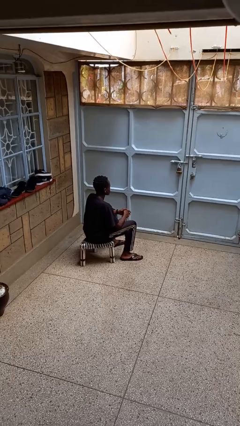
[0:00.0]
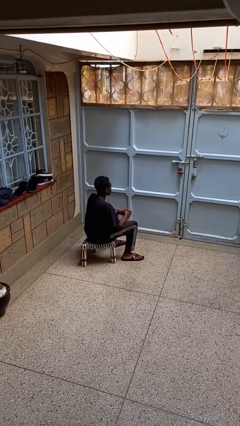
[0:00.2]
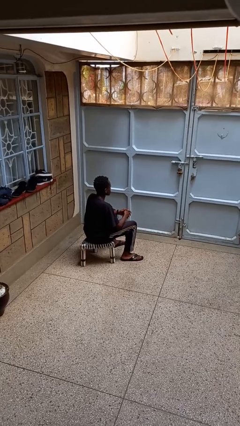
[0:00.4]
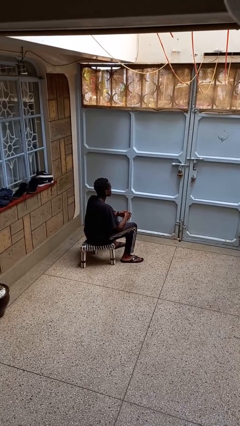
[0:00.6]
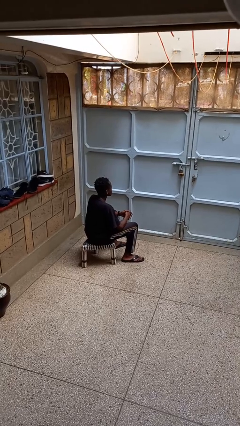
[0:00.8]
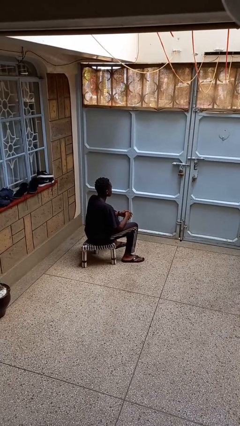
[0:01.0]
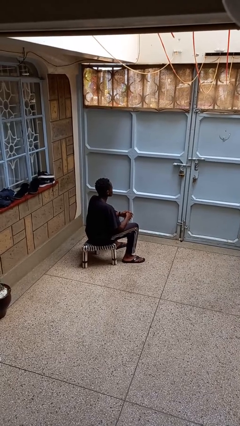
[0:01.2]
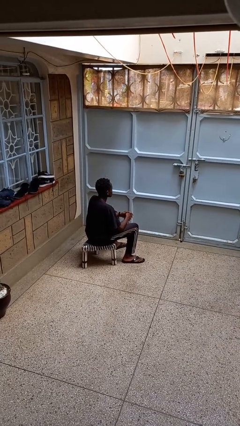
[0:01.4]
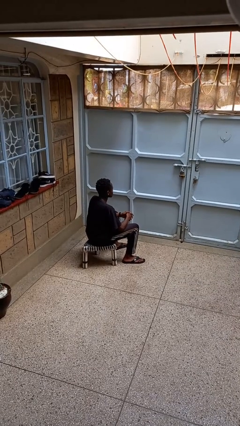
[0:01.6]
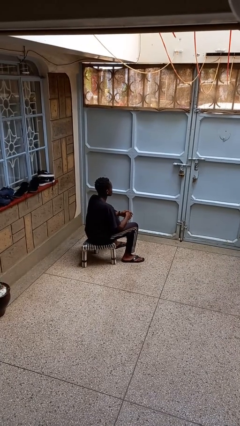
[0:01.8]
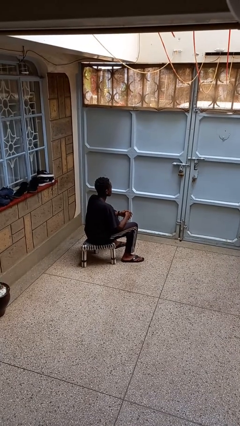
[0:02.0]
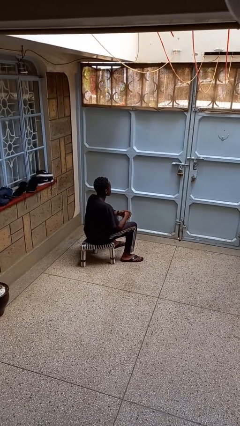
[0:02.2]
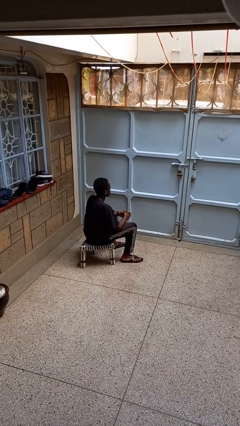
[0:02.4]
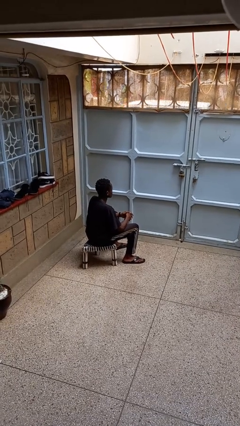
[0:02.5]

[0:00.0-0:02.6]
person nods head

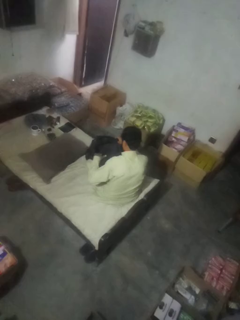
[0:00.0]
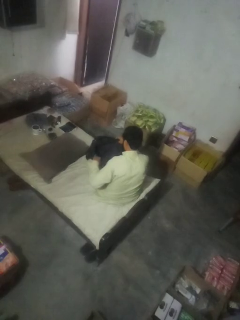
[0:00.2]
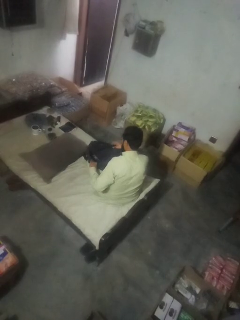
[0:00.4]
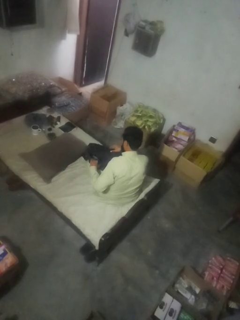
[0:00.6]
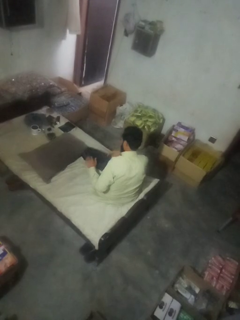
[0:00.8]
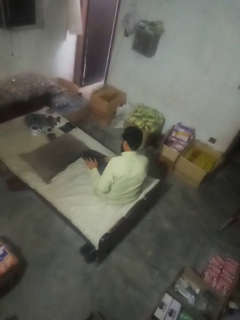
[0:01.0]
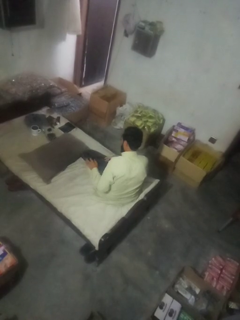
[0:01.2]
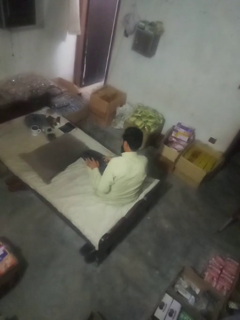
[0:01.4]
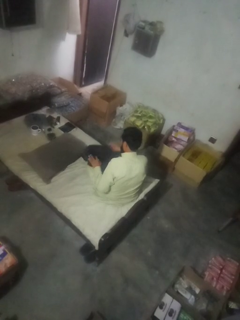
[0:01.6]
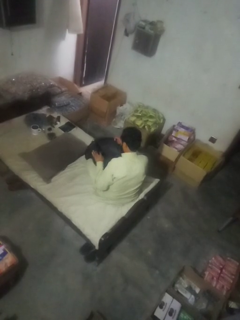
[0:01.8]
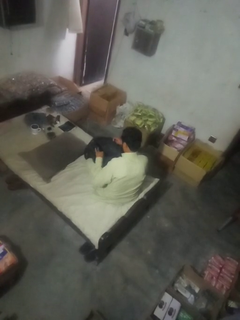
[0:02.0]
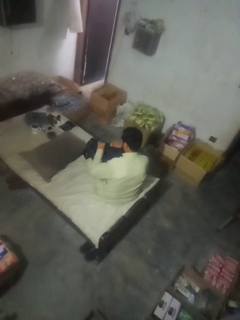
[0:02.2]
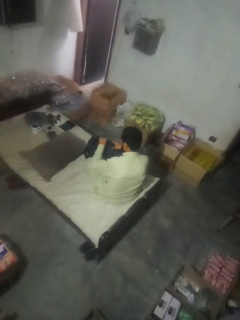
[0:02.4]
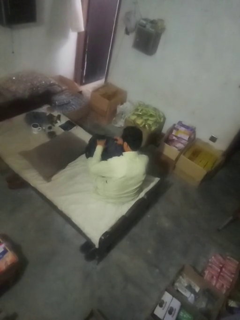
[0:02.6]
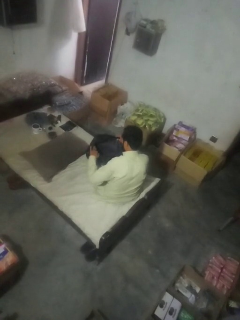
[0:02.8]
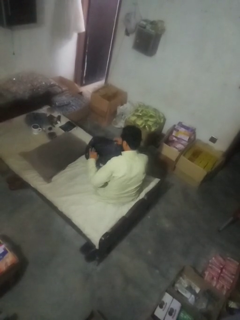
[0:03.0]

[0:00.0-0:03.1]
person searches in bag

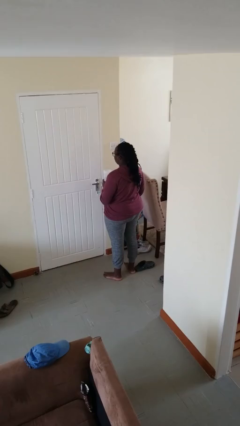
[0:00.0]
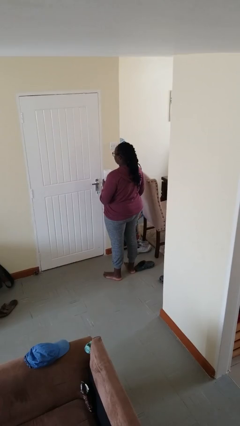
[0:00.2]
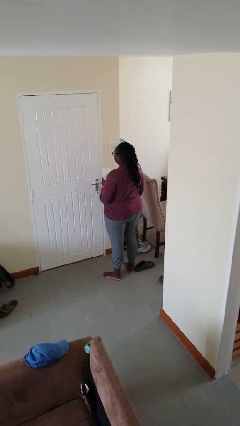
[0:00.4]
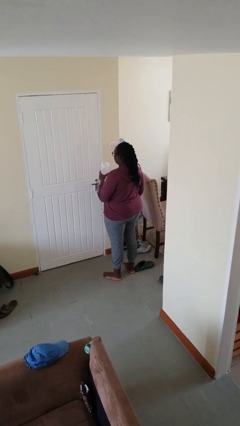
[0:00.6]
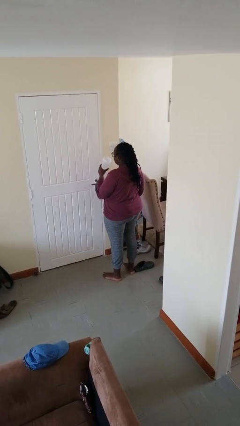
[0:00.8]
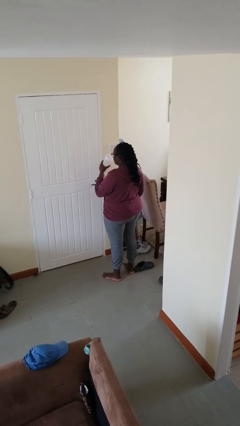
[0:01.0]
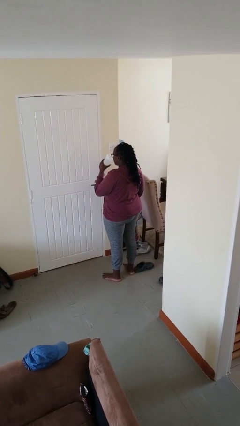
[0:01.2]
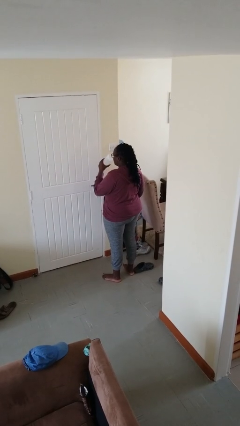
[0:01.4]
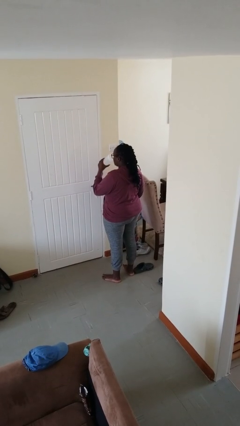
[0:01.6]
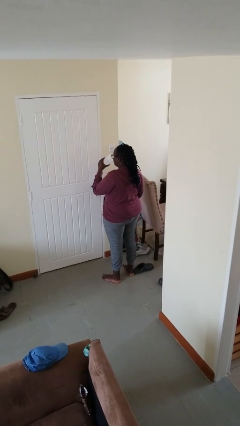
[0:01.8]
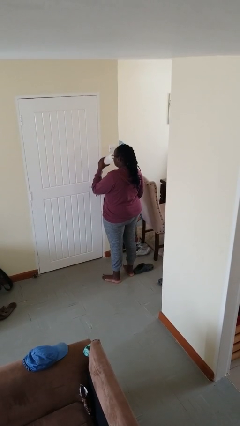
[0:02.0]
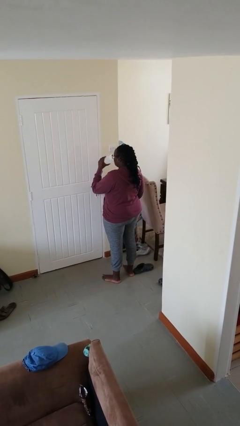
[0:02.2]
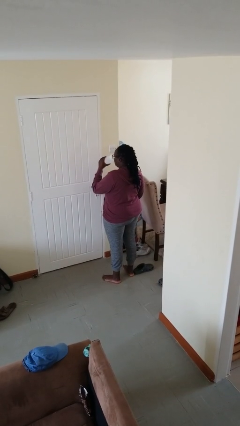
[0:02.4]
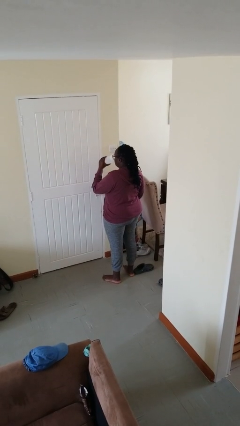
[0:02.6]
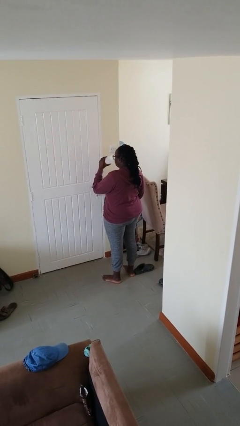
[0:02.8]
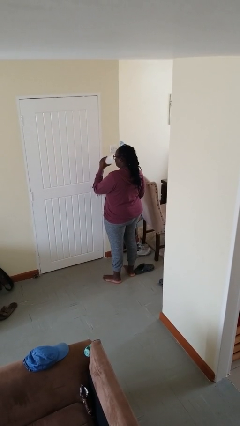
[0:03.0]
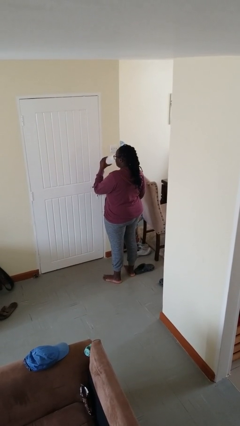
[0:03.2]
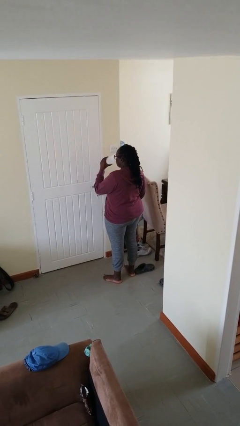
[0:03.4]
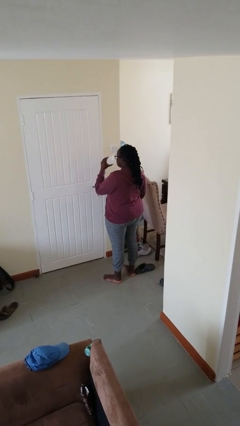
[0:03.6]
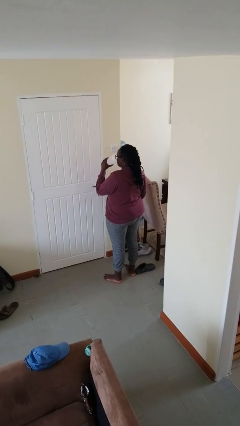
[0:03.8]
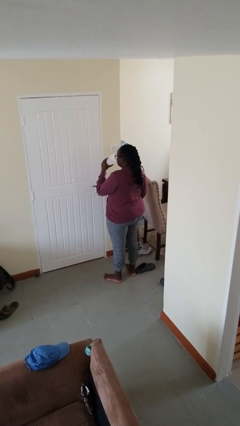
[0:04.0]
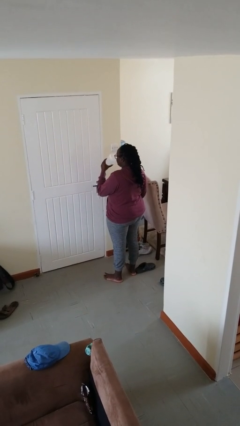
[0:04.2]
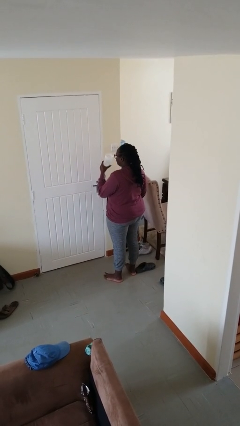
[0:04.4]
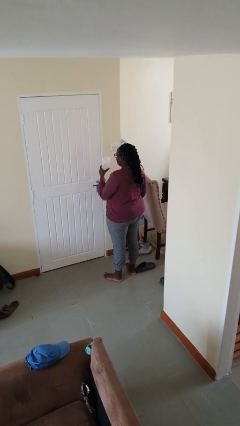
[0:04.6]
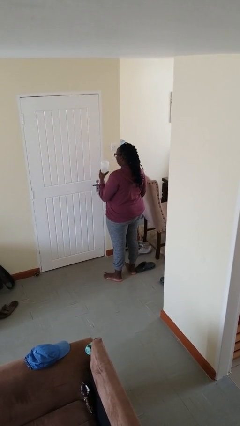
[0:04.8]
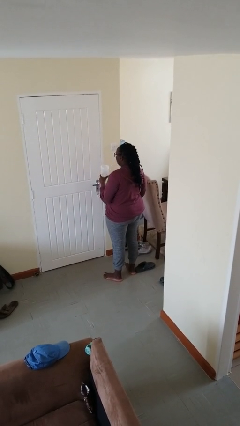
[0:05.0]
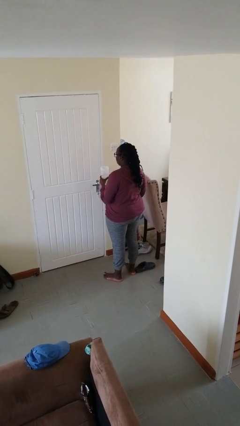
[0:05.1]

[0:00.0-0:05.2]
person drinks from bottle

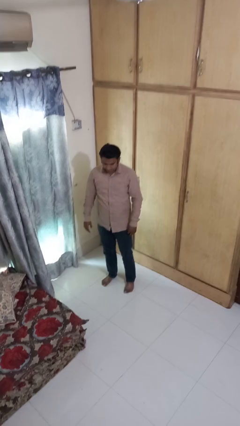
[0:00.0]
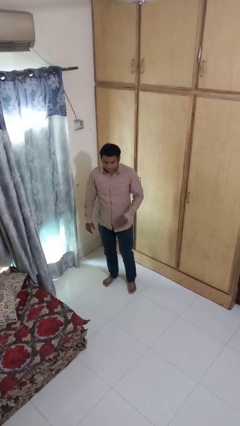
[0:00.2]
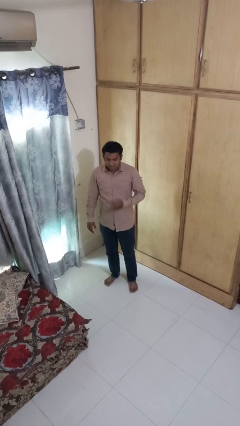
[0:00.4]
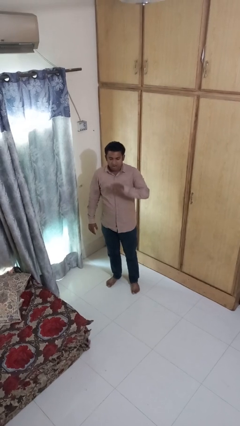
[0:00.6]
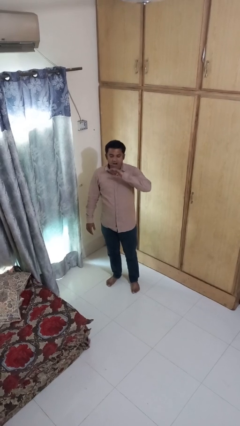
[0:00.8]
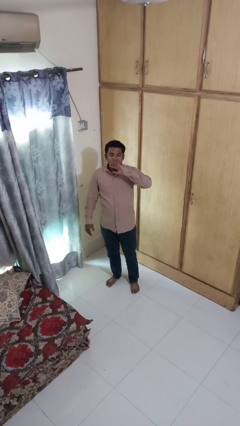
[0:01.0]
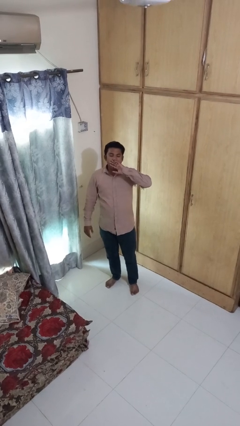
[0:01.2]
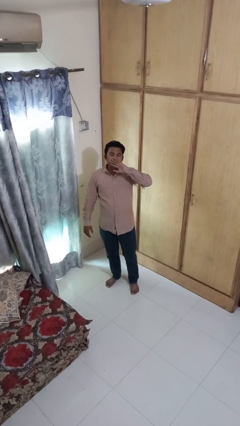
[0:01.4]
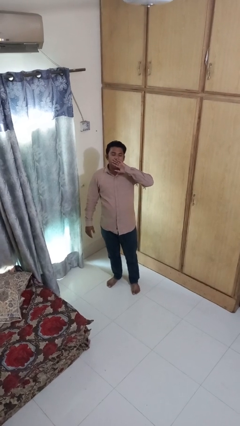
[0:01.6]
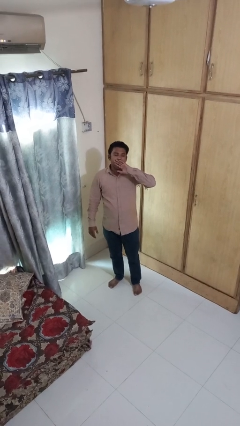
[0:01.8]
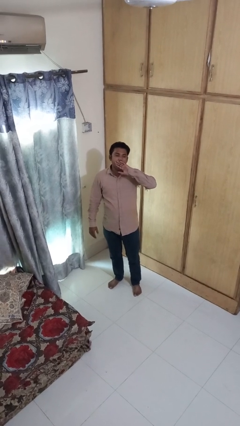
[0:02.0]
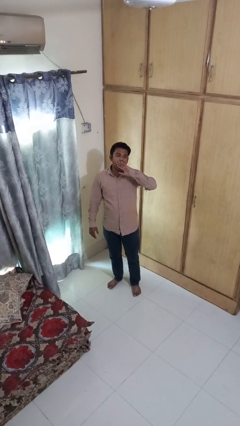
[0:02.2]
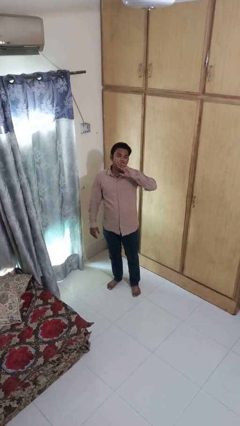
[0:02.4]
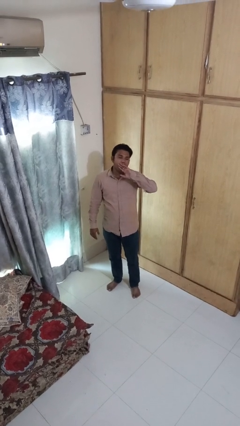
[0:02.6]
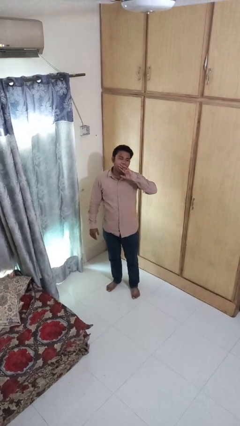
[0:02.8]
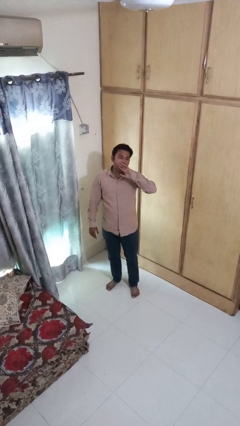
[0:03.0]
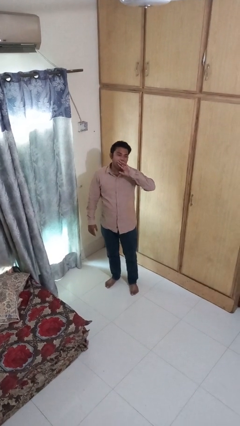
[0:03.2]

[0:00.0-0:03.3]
person yawns

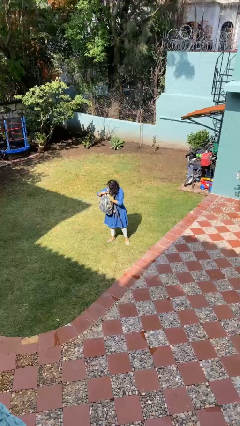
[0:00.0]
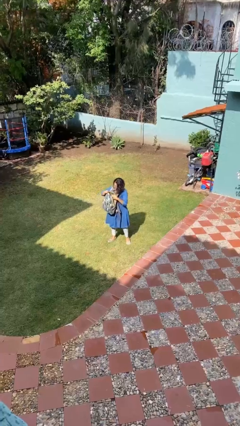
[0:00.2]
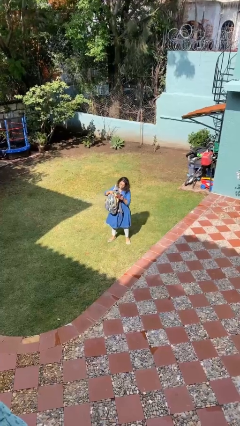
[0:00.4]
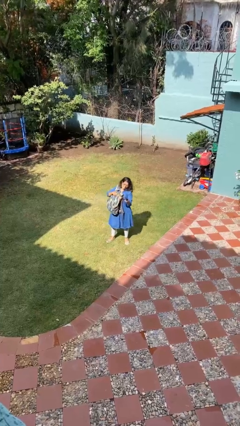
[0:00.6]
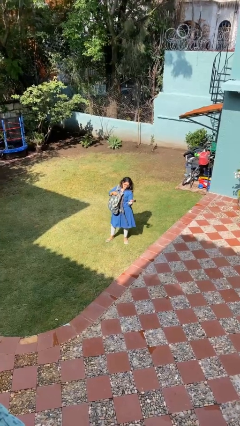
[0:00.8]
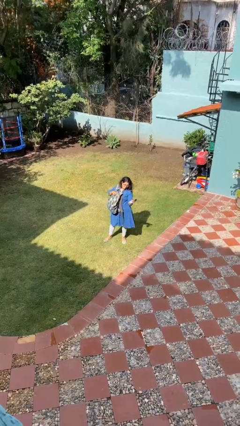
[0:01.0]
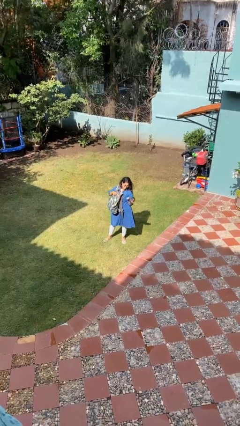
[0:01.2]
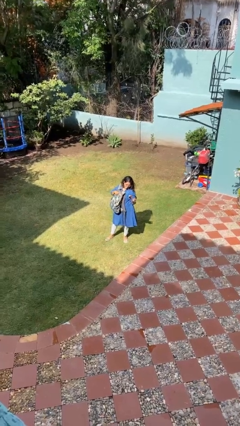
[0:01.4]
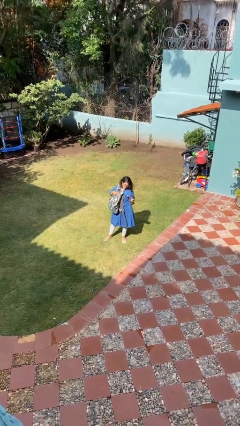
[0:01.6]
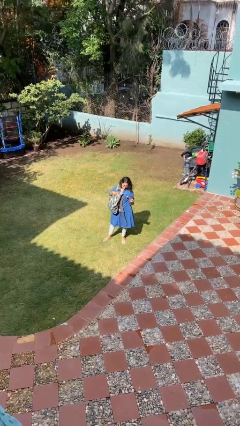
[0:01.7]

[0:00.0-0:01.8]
person takes object from backpack

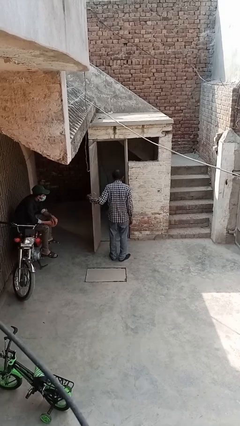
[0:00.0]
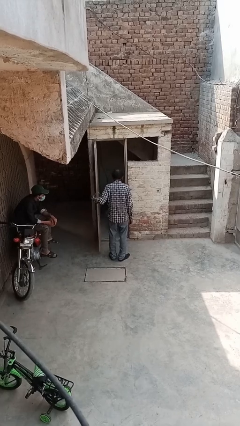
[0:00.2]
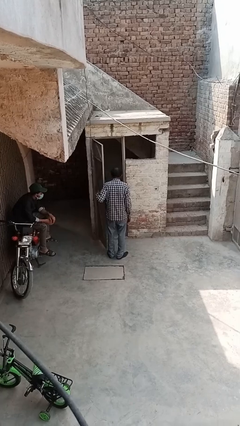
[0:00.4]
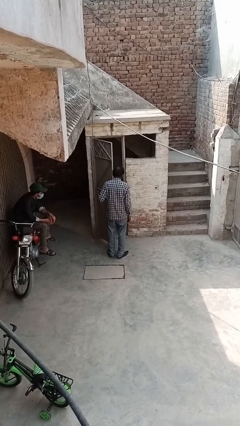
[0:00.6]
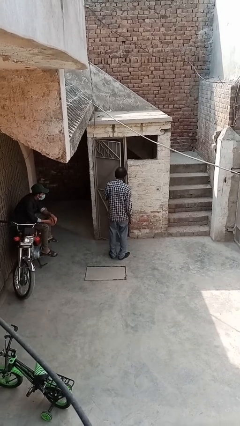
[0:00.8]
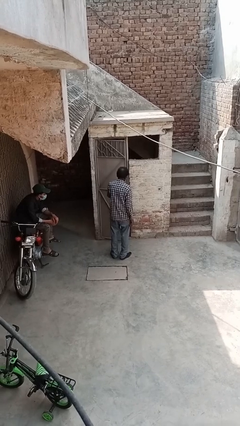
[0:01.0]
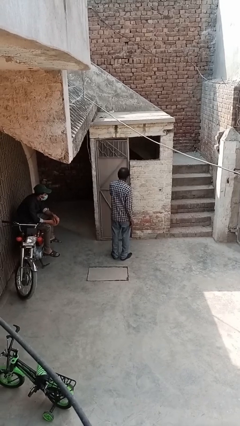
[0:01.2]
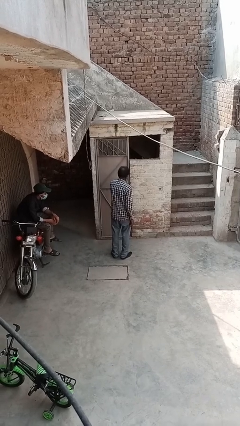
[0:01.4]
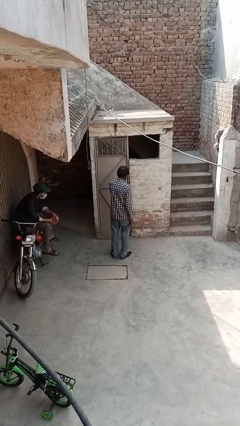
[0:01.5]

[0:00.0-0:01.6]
person closes facility door

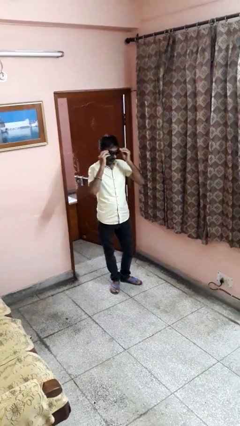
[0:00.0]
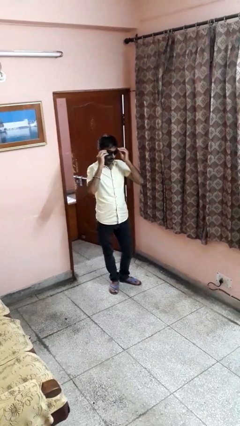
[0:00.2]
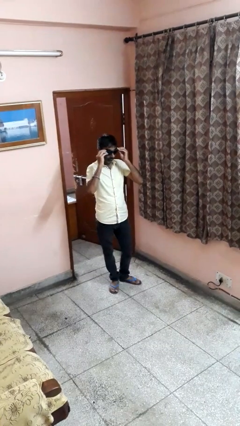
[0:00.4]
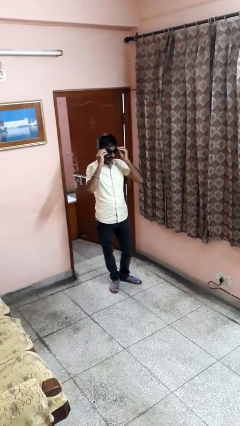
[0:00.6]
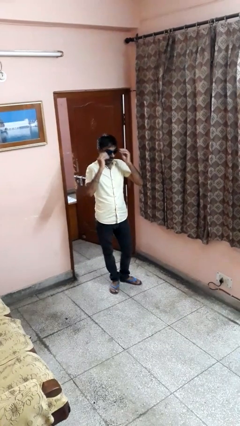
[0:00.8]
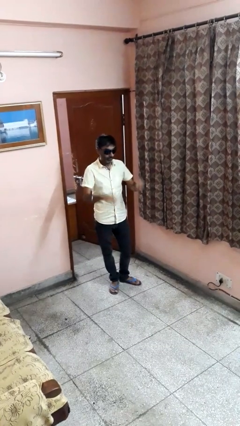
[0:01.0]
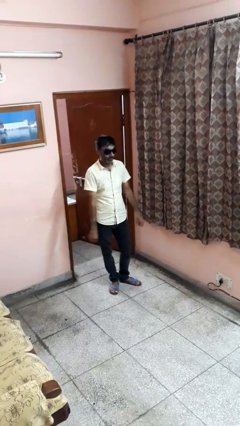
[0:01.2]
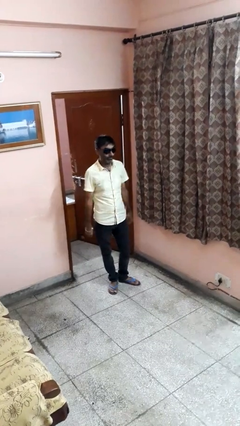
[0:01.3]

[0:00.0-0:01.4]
person puts on sunglasses
